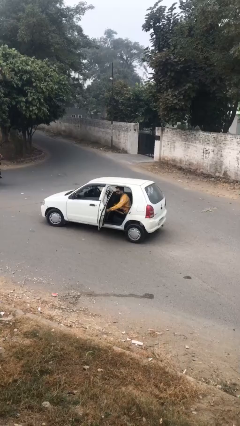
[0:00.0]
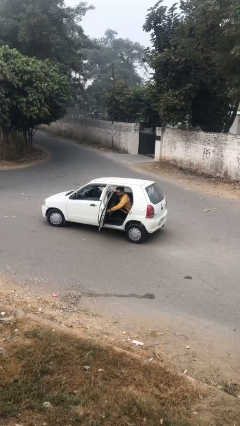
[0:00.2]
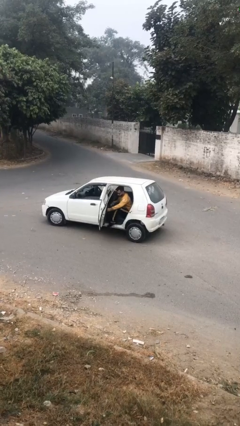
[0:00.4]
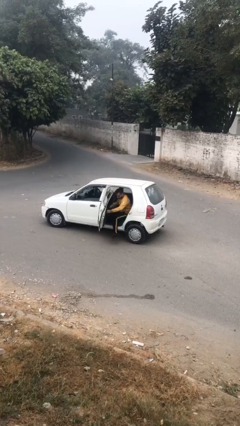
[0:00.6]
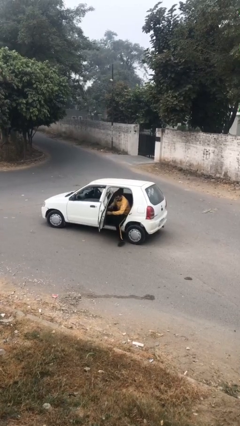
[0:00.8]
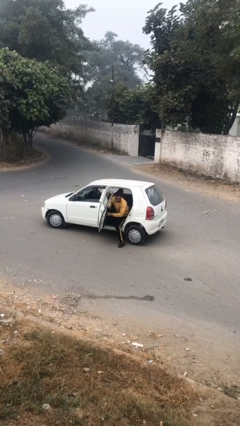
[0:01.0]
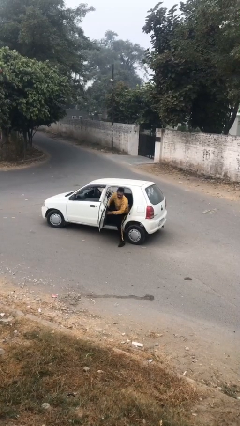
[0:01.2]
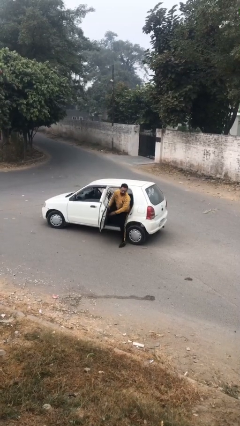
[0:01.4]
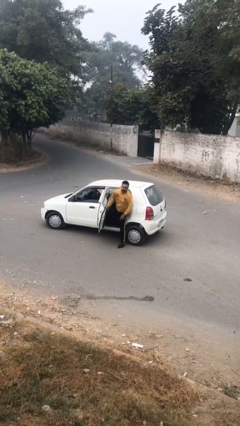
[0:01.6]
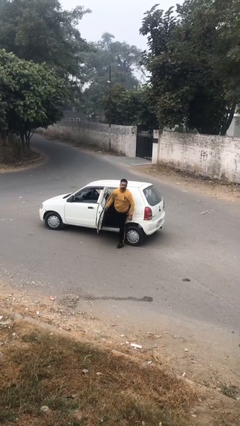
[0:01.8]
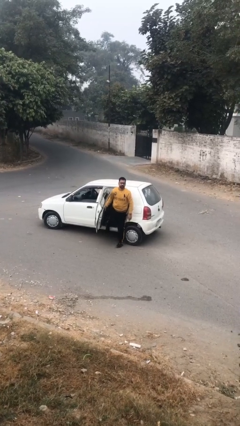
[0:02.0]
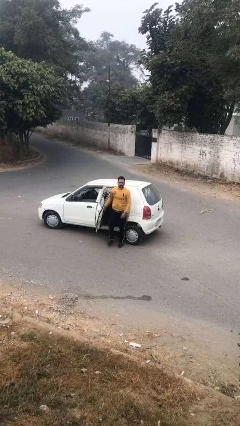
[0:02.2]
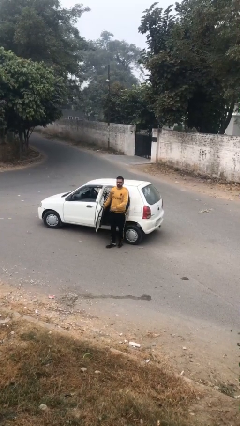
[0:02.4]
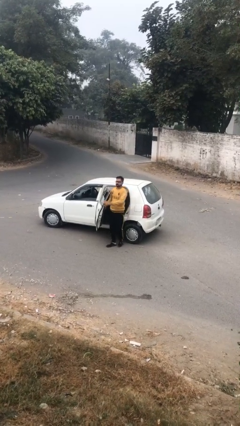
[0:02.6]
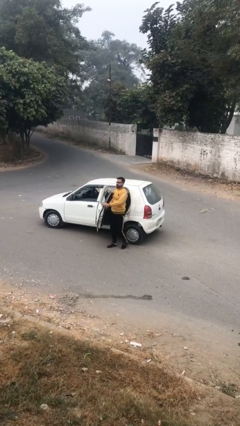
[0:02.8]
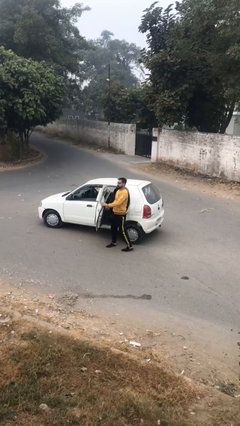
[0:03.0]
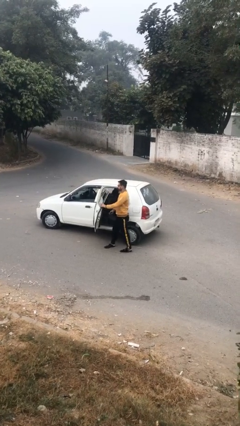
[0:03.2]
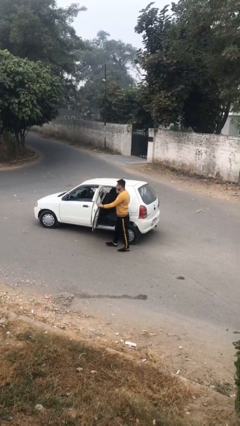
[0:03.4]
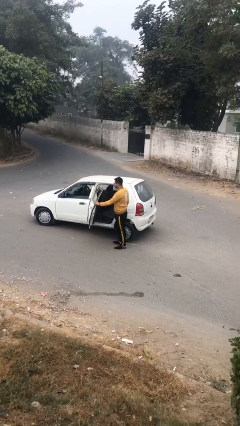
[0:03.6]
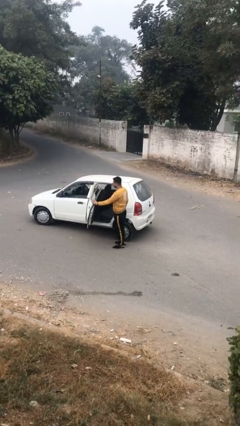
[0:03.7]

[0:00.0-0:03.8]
person exits car

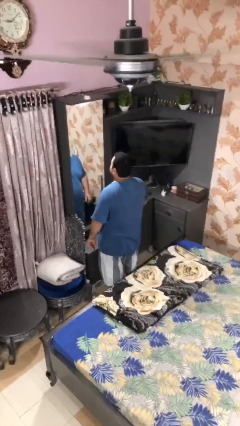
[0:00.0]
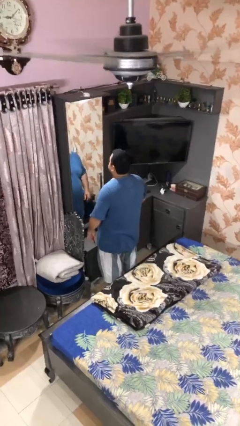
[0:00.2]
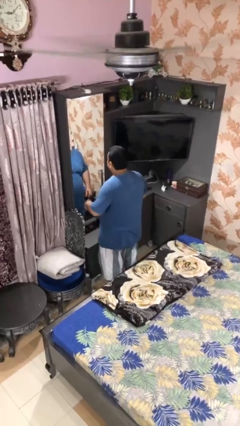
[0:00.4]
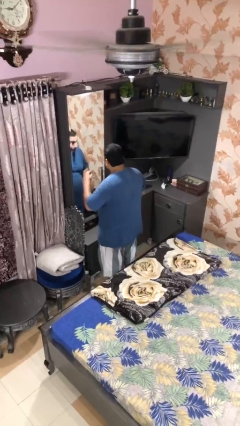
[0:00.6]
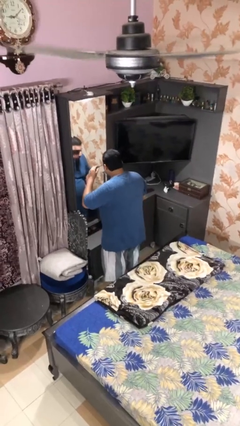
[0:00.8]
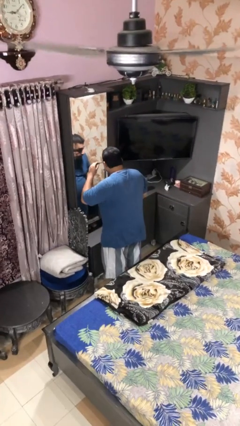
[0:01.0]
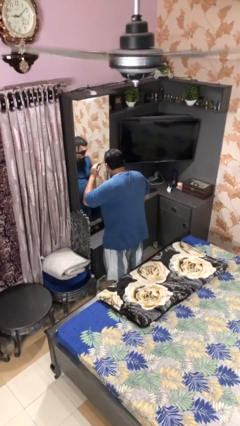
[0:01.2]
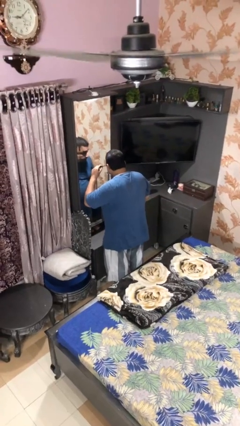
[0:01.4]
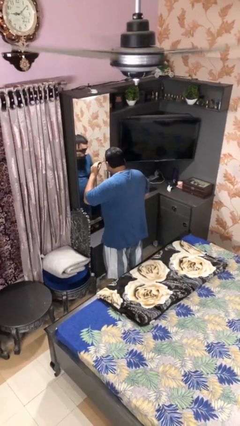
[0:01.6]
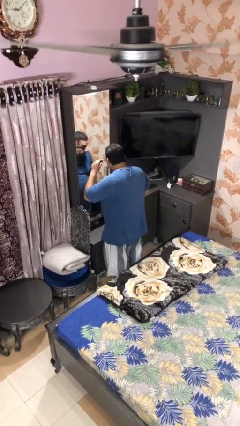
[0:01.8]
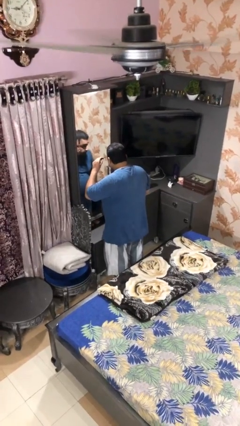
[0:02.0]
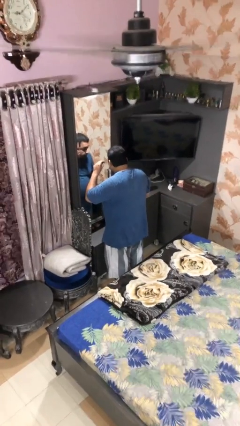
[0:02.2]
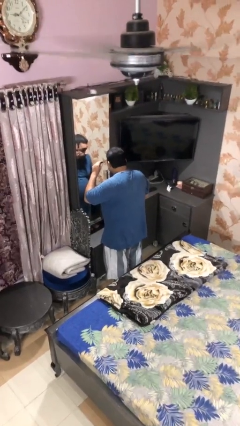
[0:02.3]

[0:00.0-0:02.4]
person applies eye makeup

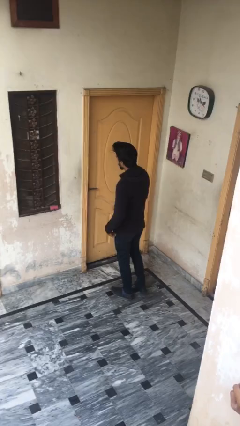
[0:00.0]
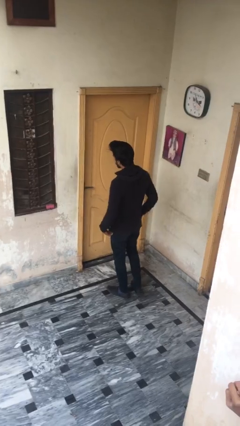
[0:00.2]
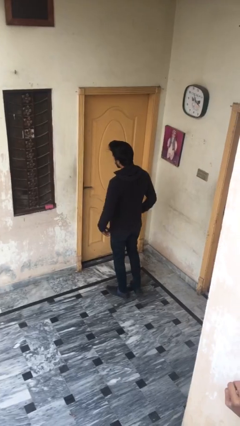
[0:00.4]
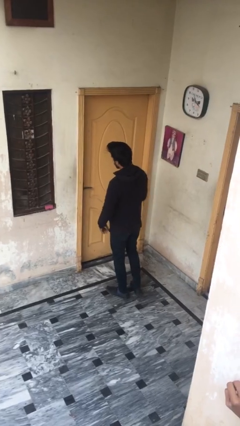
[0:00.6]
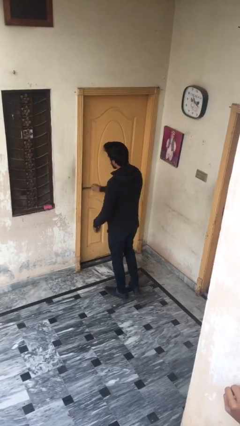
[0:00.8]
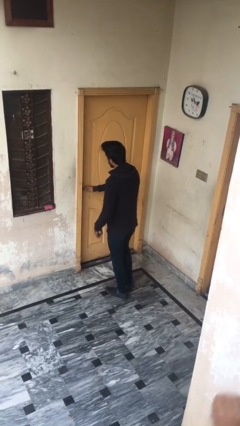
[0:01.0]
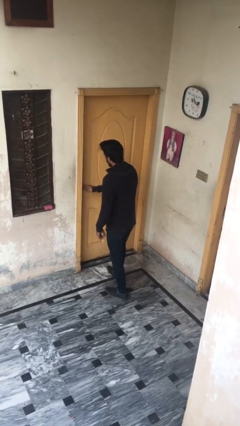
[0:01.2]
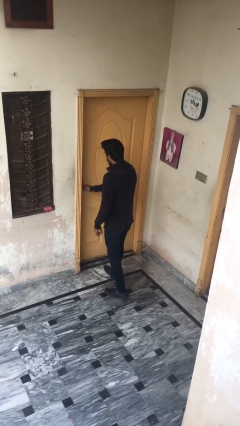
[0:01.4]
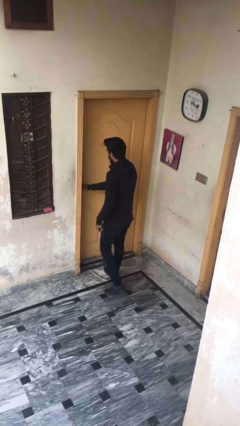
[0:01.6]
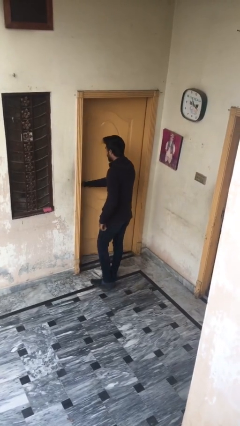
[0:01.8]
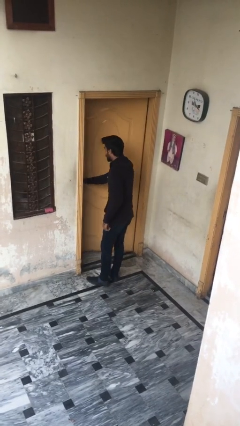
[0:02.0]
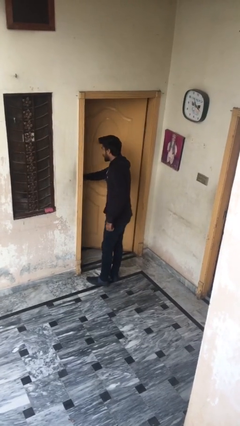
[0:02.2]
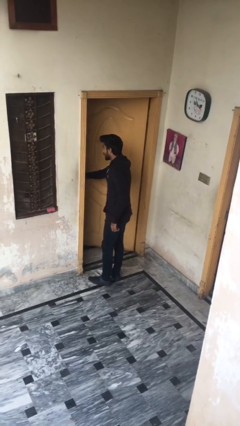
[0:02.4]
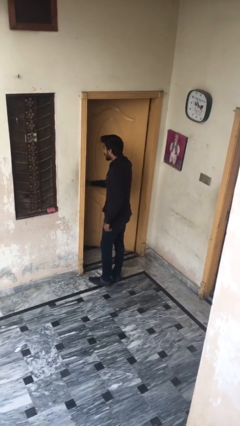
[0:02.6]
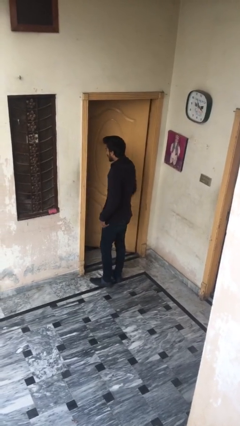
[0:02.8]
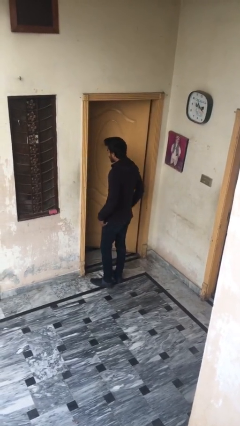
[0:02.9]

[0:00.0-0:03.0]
person opens facility door

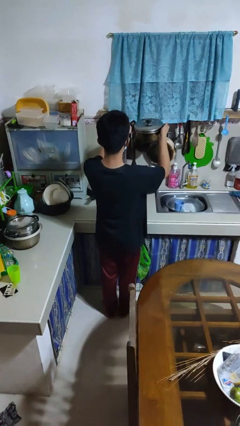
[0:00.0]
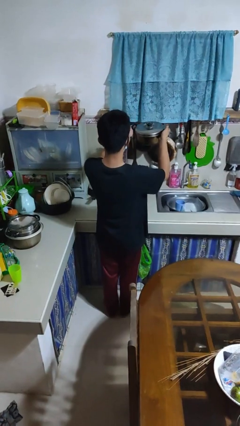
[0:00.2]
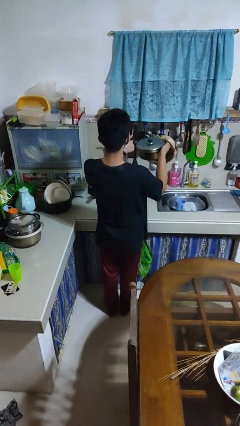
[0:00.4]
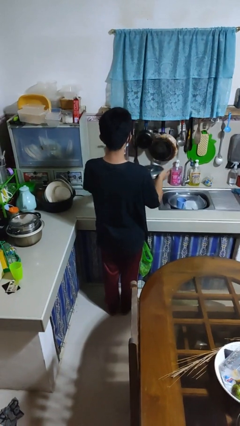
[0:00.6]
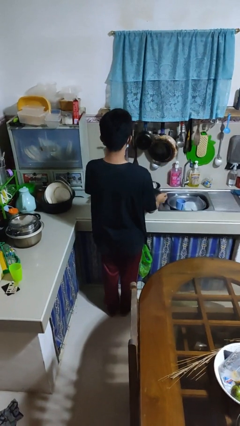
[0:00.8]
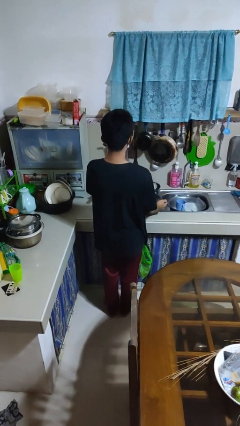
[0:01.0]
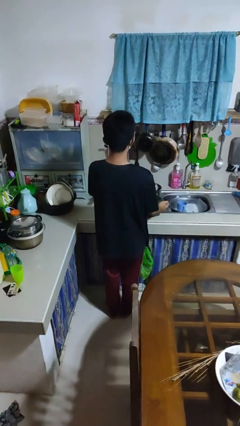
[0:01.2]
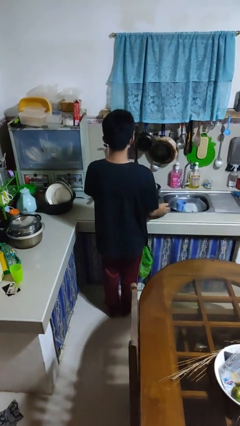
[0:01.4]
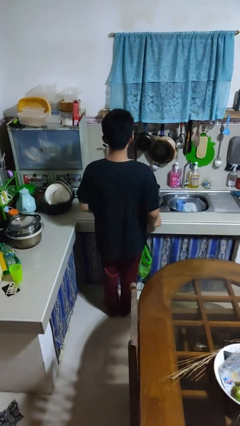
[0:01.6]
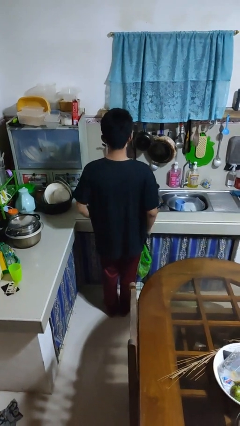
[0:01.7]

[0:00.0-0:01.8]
person puts down object on countertop

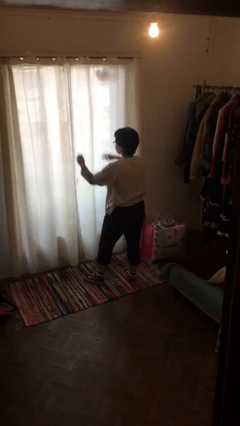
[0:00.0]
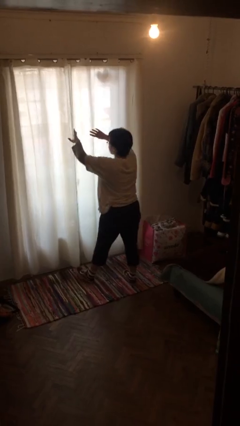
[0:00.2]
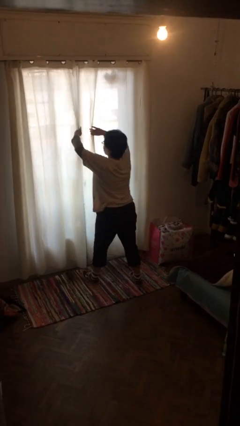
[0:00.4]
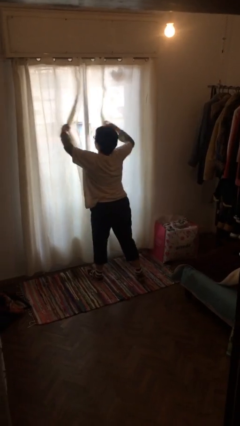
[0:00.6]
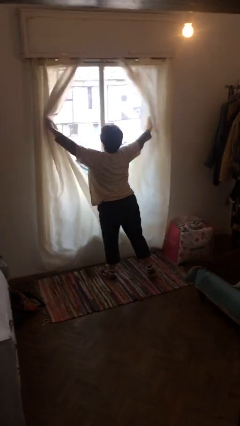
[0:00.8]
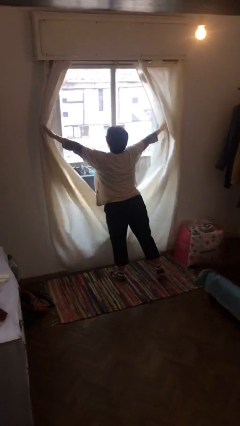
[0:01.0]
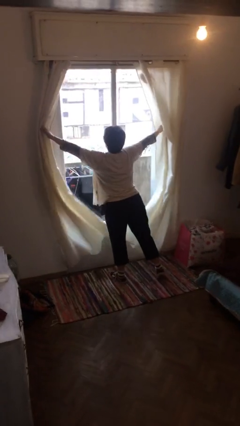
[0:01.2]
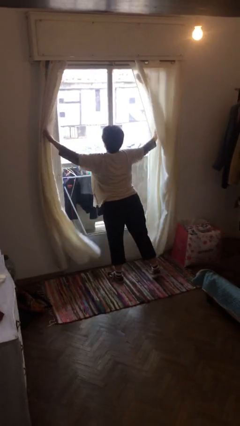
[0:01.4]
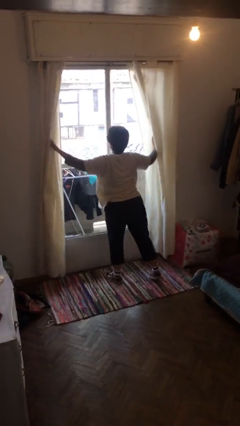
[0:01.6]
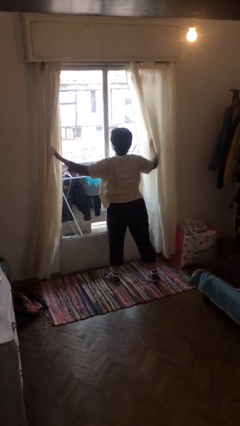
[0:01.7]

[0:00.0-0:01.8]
person opens curtains

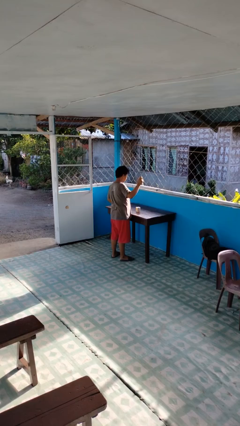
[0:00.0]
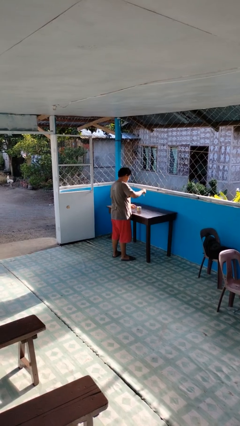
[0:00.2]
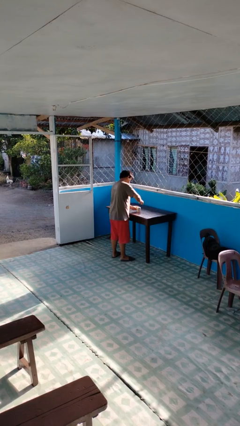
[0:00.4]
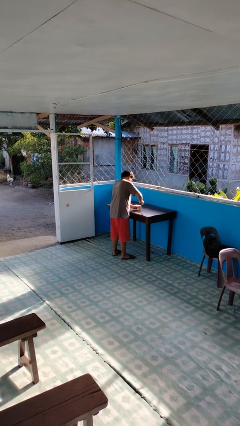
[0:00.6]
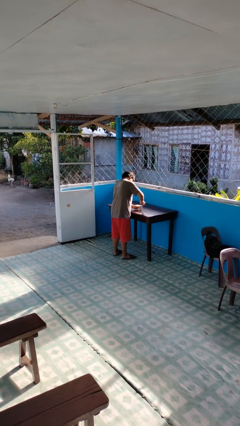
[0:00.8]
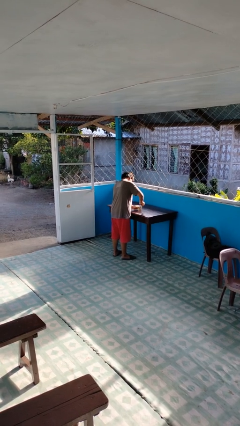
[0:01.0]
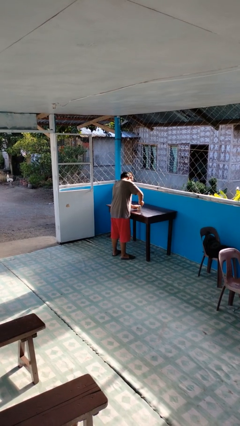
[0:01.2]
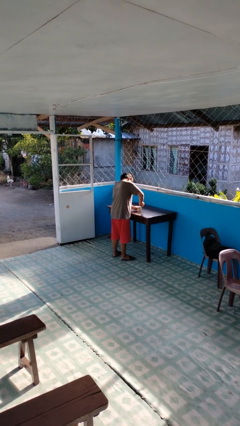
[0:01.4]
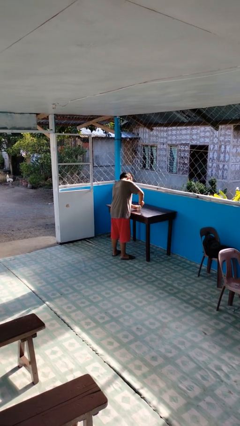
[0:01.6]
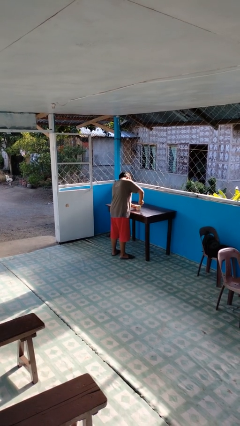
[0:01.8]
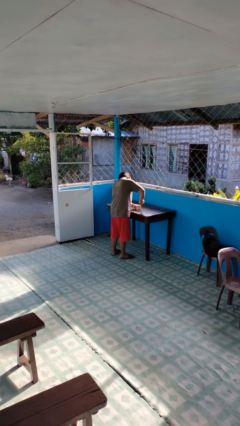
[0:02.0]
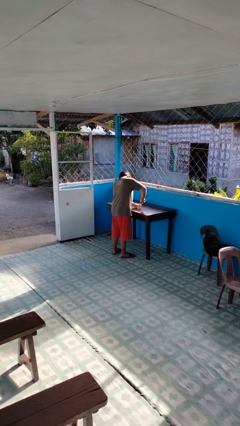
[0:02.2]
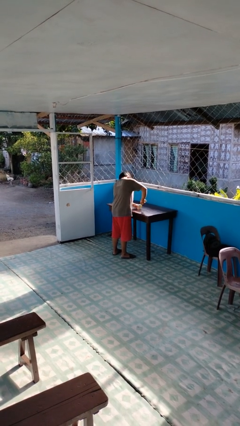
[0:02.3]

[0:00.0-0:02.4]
person opens can with can opener

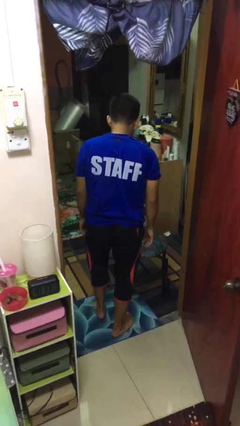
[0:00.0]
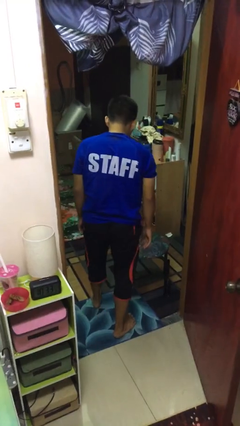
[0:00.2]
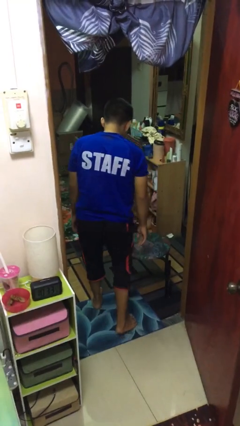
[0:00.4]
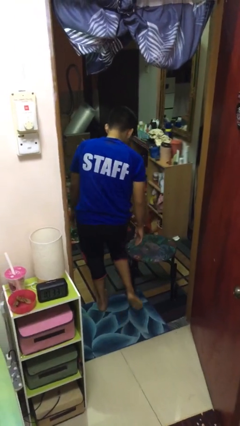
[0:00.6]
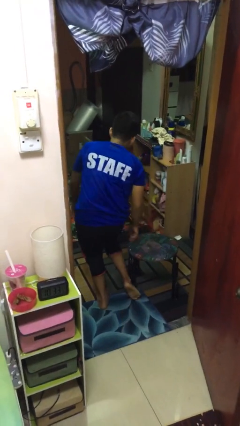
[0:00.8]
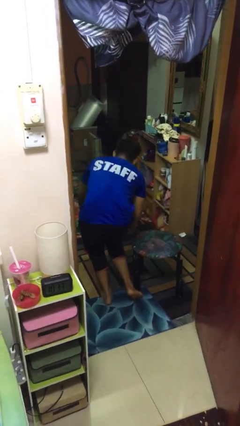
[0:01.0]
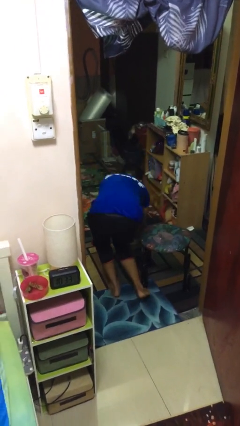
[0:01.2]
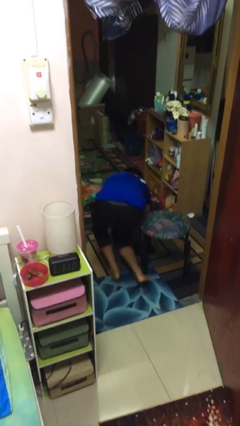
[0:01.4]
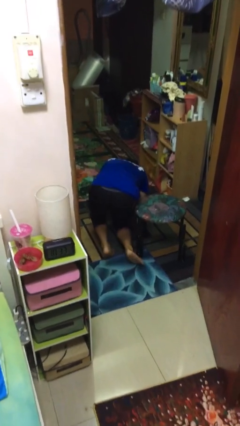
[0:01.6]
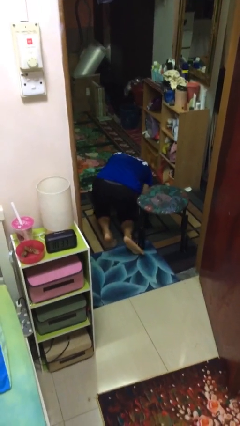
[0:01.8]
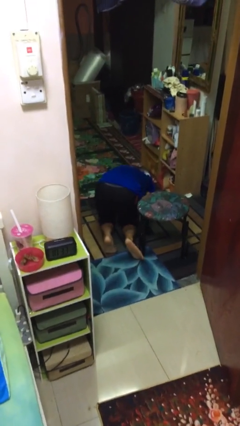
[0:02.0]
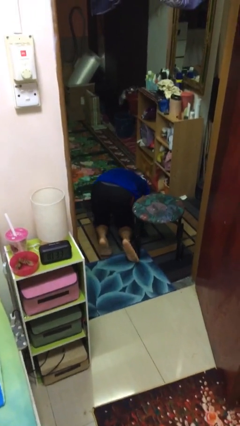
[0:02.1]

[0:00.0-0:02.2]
person trips on object on floor
